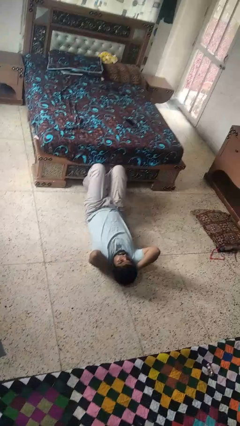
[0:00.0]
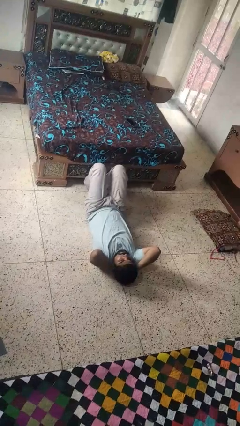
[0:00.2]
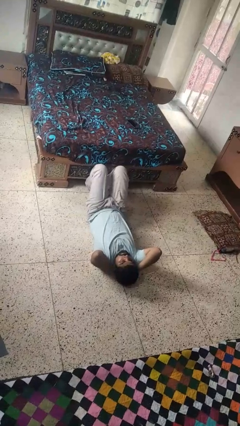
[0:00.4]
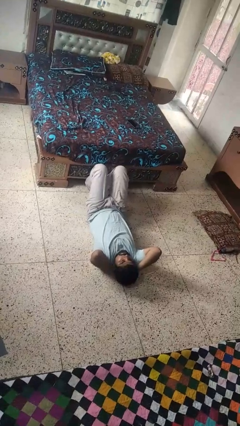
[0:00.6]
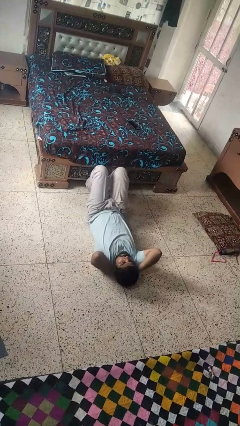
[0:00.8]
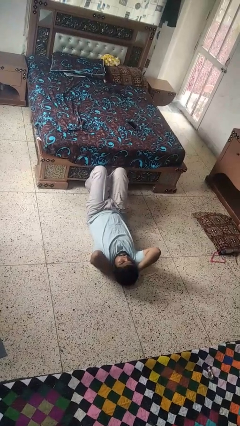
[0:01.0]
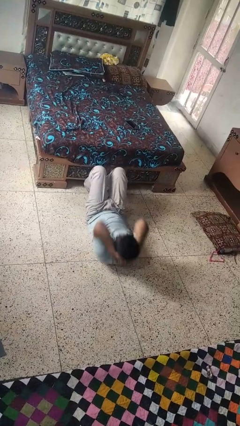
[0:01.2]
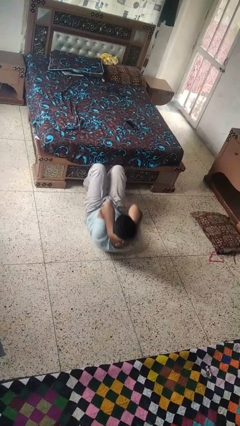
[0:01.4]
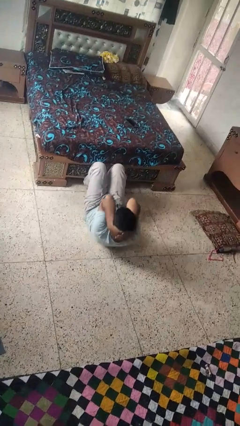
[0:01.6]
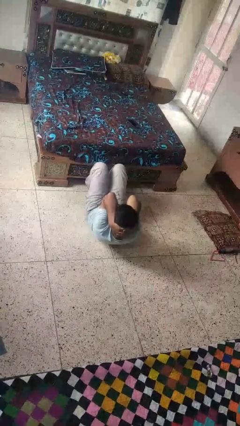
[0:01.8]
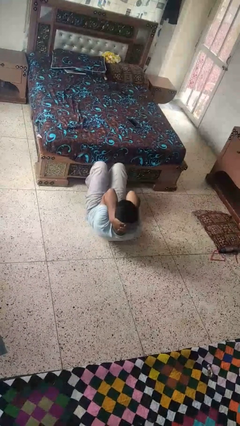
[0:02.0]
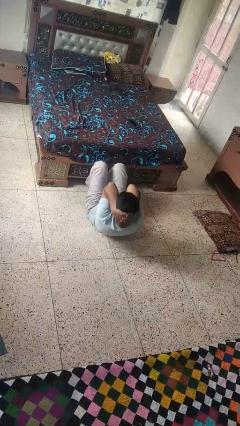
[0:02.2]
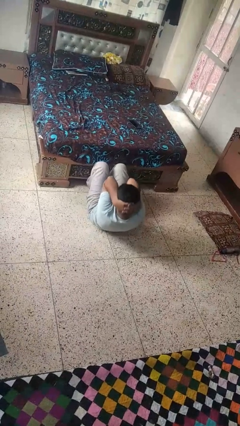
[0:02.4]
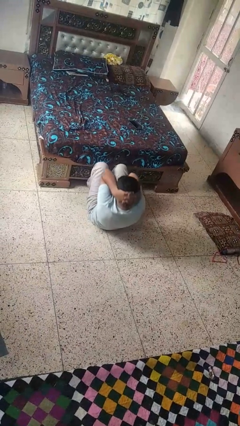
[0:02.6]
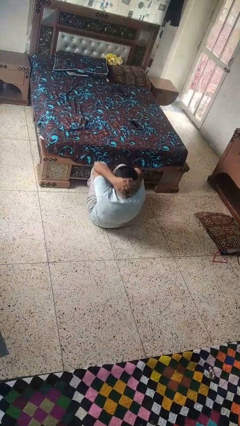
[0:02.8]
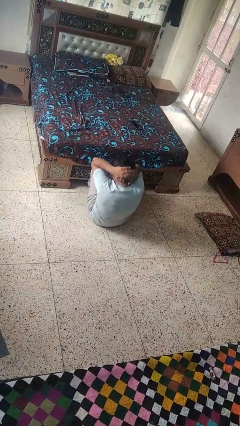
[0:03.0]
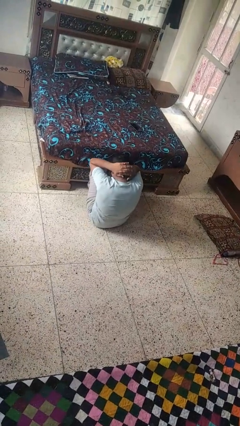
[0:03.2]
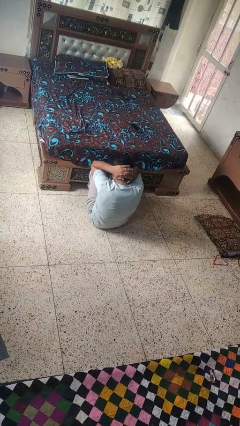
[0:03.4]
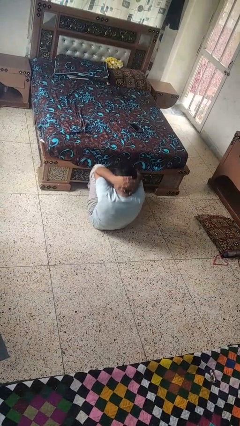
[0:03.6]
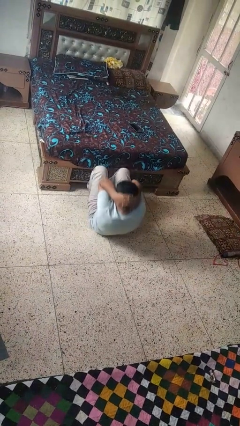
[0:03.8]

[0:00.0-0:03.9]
person exercises with situp

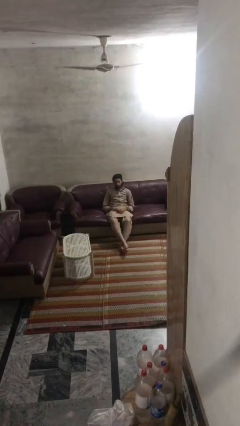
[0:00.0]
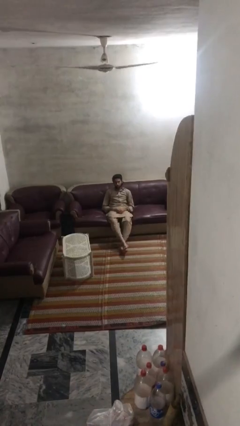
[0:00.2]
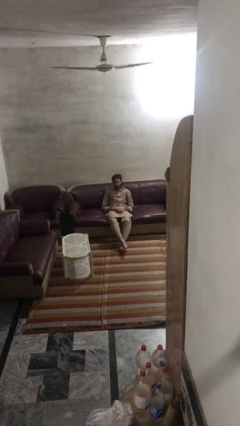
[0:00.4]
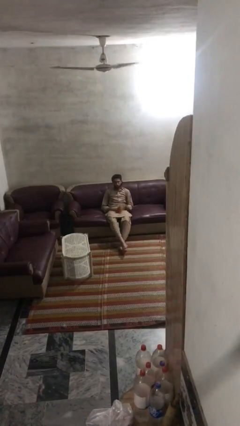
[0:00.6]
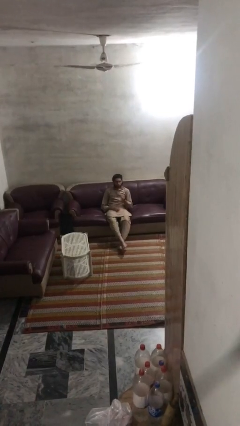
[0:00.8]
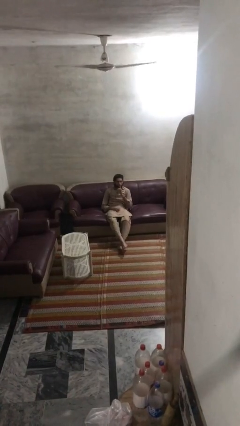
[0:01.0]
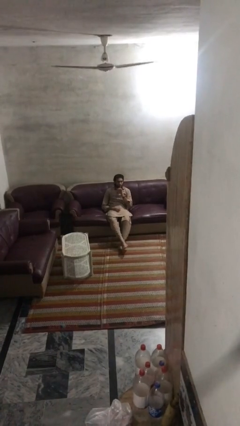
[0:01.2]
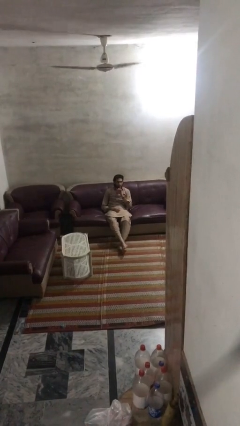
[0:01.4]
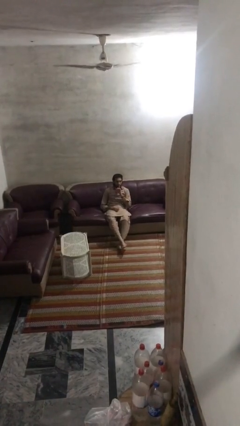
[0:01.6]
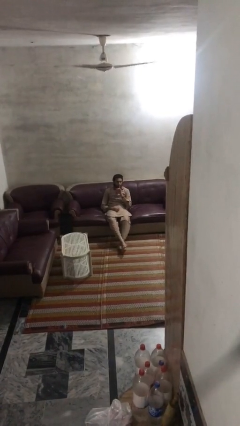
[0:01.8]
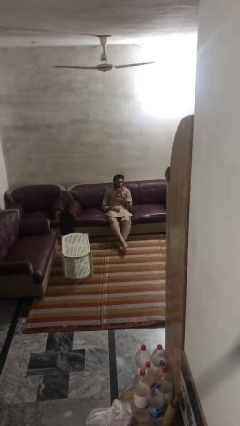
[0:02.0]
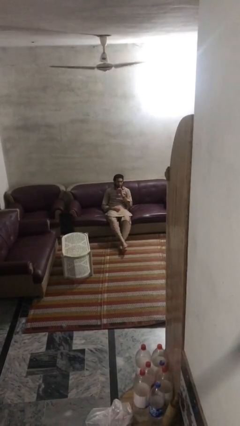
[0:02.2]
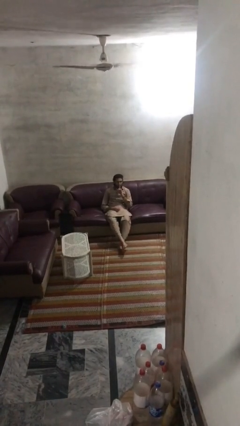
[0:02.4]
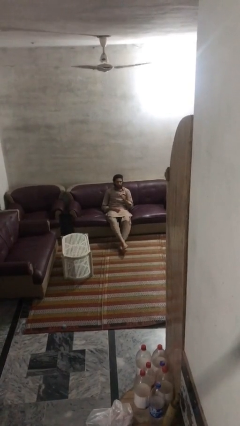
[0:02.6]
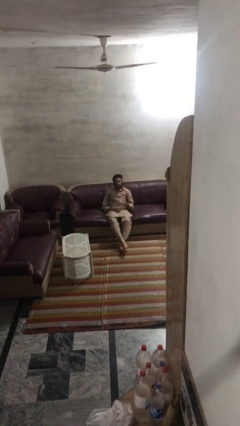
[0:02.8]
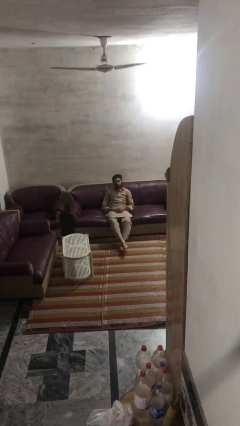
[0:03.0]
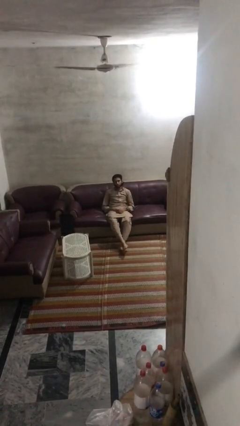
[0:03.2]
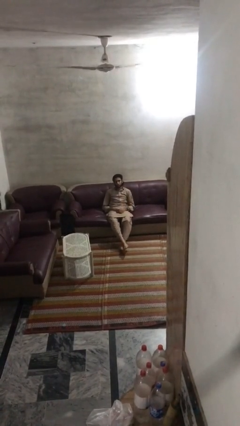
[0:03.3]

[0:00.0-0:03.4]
person gestures be quiet

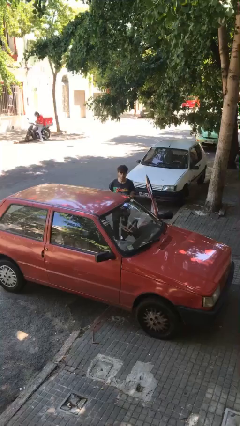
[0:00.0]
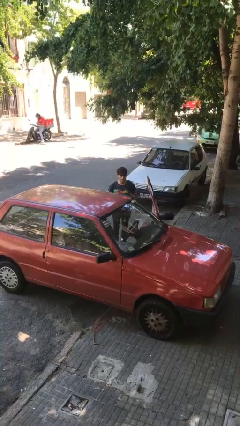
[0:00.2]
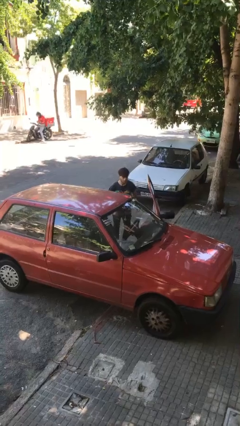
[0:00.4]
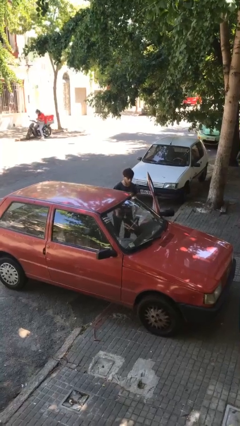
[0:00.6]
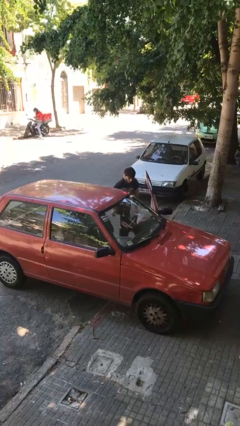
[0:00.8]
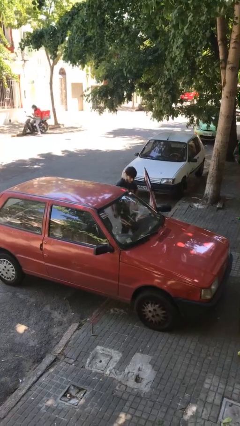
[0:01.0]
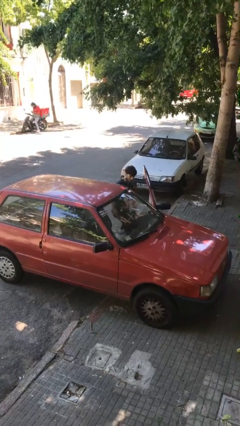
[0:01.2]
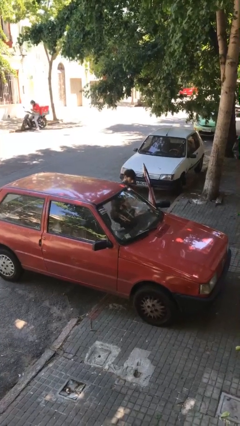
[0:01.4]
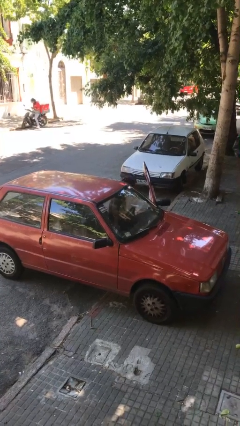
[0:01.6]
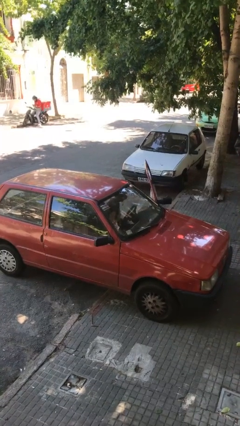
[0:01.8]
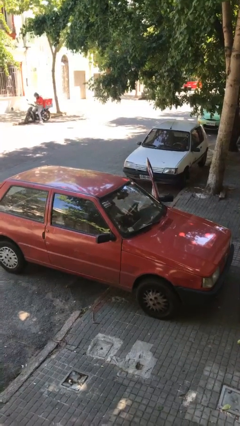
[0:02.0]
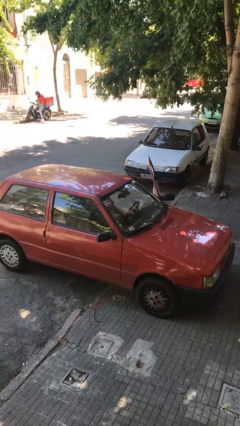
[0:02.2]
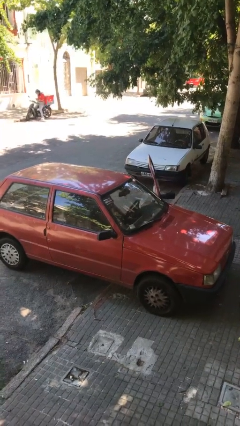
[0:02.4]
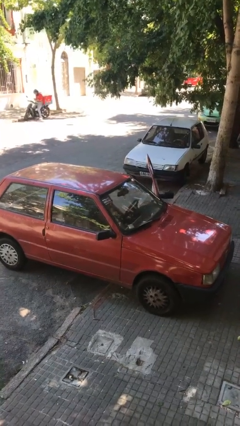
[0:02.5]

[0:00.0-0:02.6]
person enters car

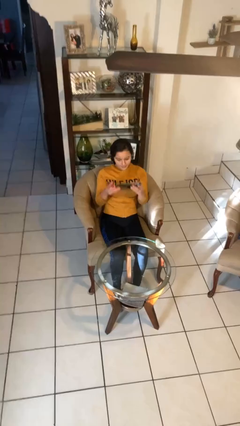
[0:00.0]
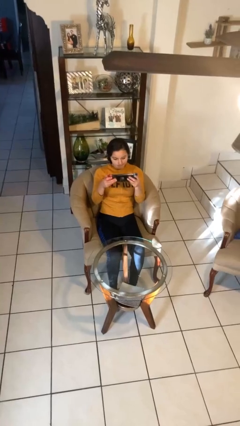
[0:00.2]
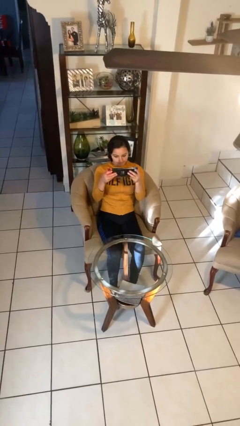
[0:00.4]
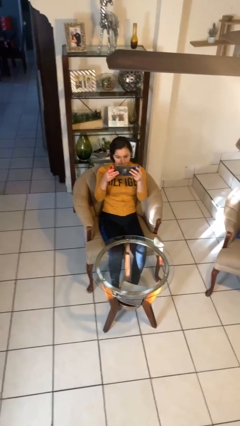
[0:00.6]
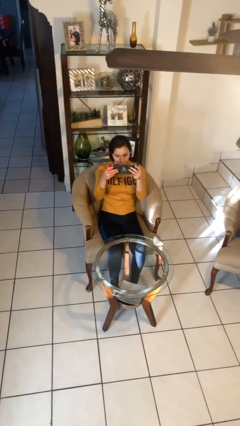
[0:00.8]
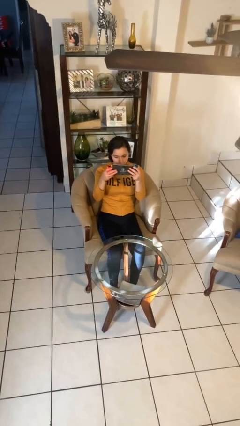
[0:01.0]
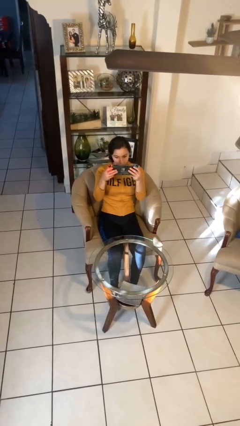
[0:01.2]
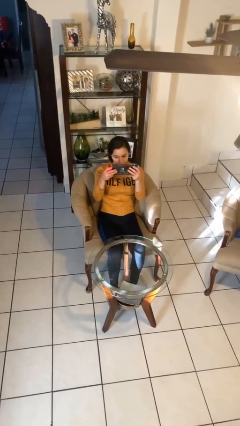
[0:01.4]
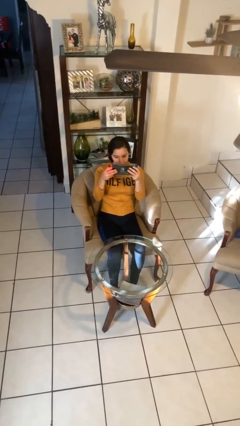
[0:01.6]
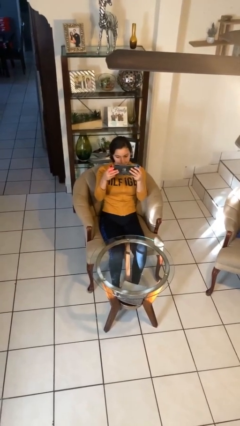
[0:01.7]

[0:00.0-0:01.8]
person interacts with handheld game

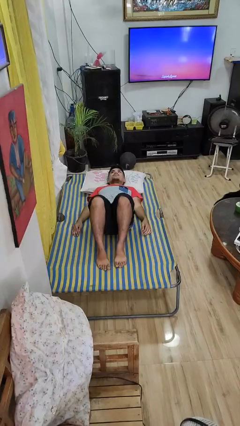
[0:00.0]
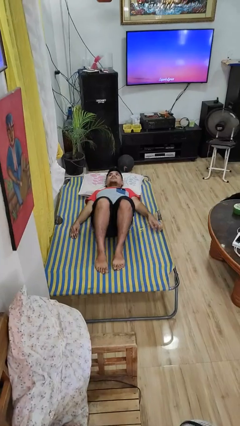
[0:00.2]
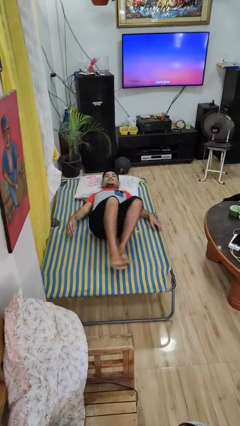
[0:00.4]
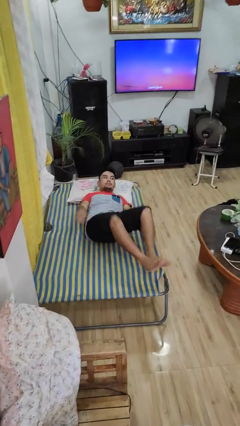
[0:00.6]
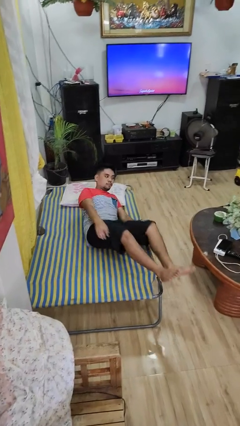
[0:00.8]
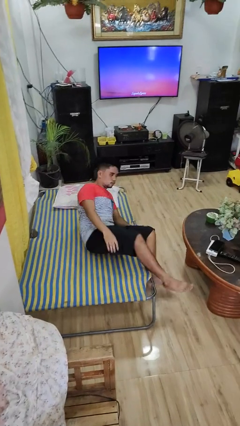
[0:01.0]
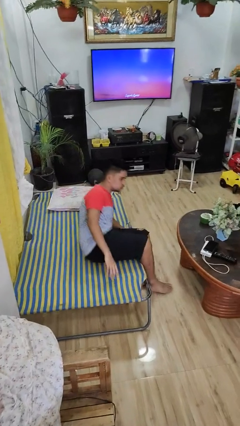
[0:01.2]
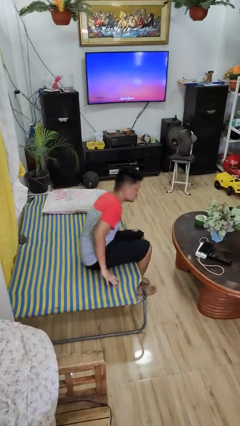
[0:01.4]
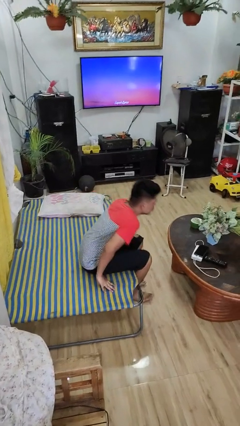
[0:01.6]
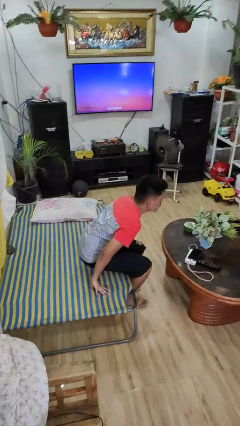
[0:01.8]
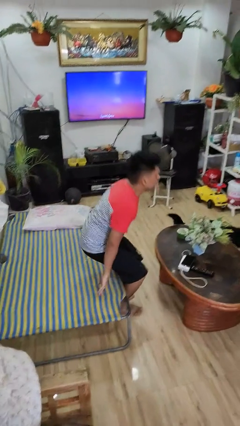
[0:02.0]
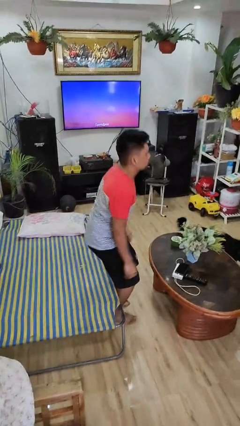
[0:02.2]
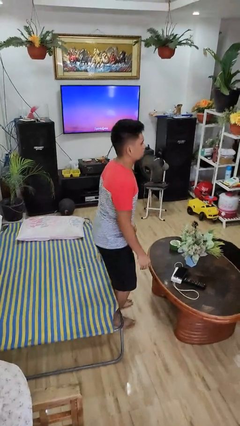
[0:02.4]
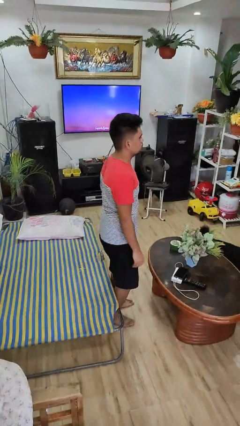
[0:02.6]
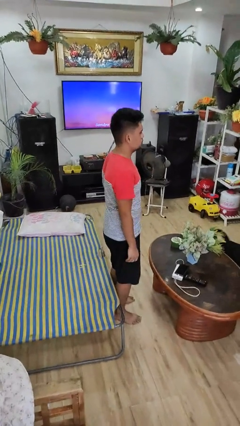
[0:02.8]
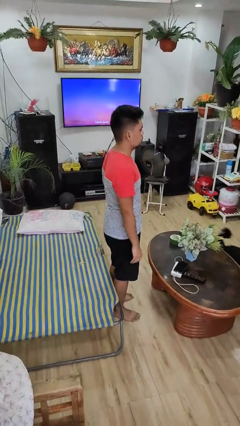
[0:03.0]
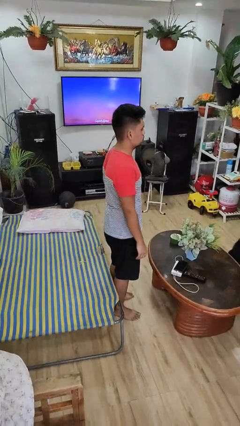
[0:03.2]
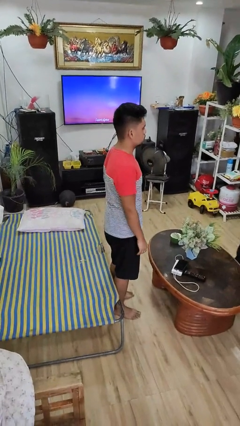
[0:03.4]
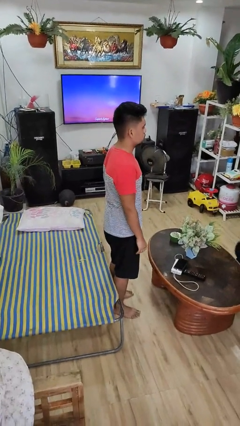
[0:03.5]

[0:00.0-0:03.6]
person stands up

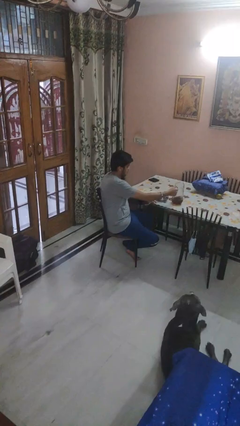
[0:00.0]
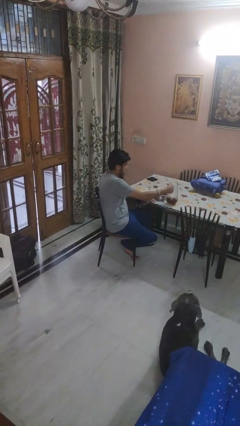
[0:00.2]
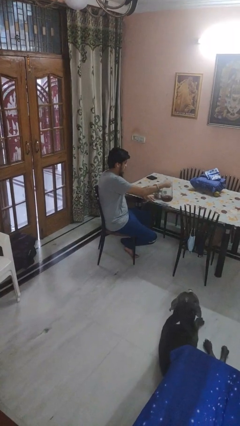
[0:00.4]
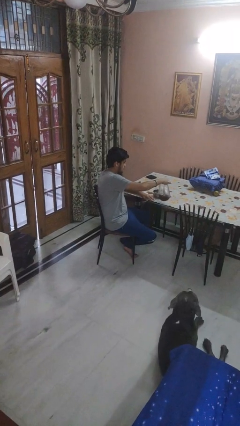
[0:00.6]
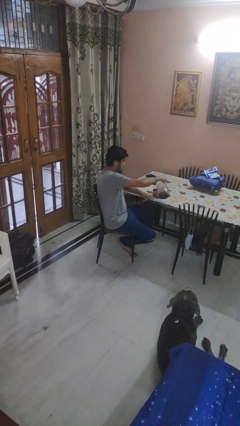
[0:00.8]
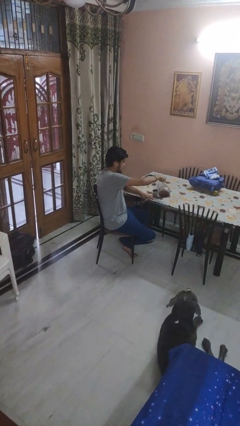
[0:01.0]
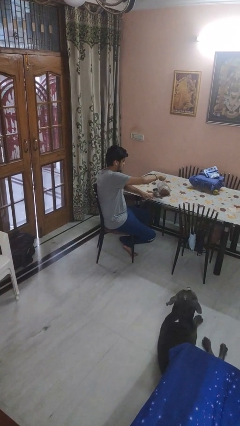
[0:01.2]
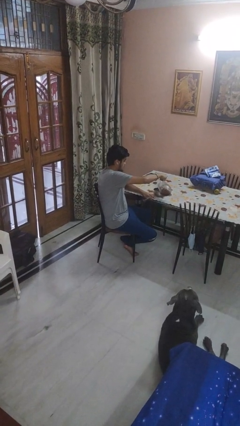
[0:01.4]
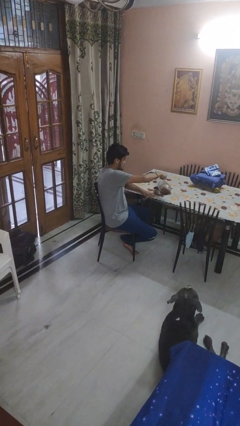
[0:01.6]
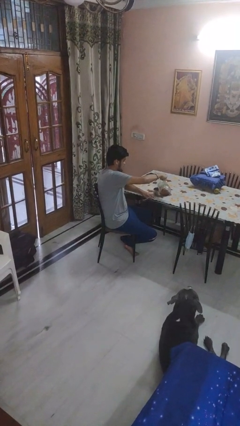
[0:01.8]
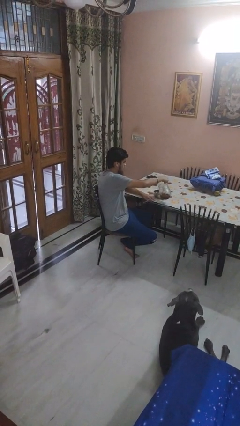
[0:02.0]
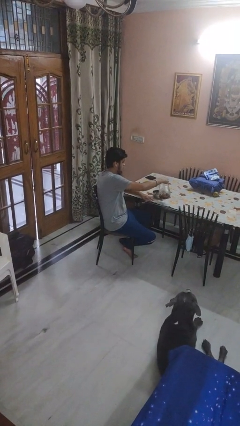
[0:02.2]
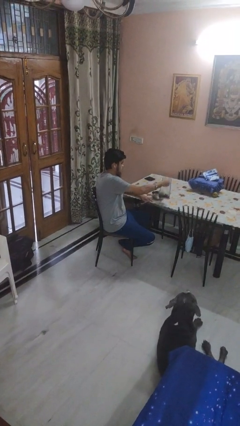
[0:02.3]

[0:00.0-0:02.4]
person pours into bowl
